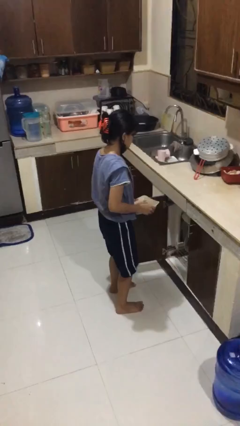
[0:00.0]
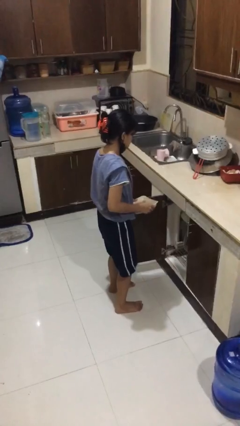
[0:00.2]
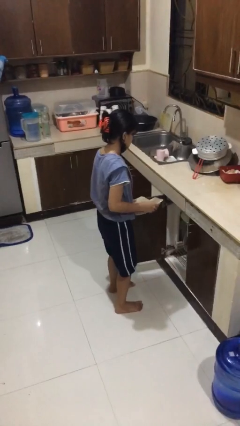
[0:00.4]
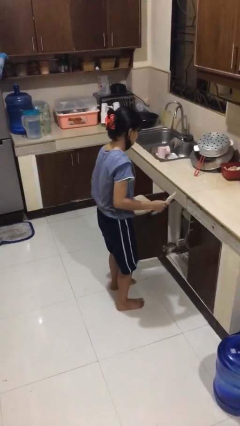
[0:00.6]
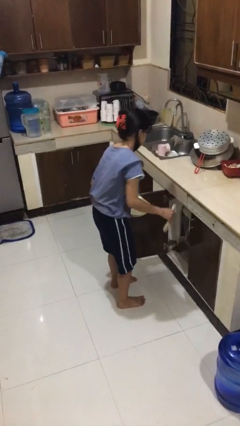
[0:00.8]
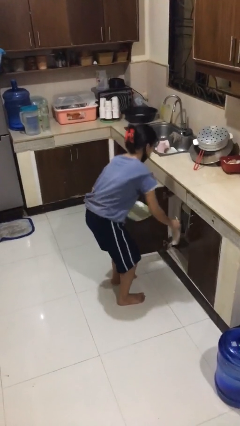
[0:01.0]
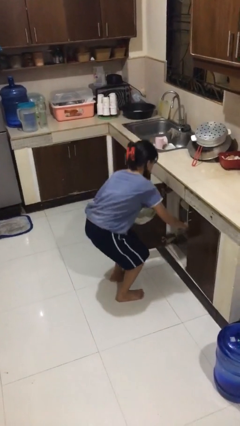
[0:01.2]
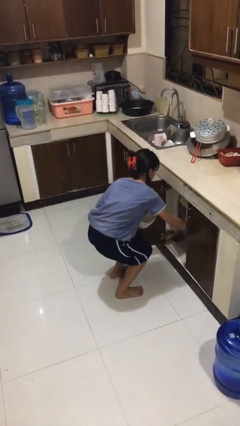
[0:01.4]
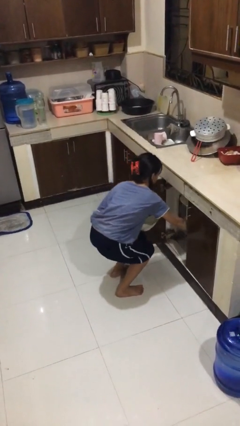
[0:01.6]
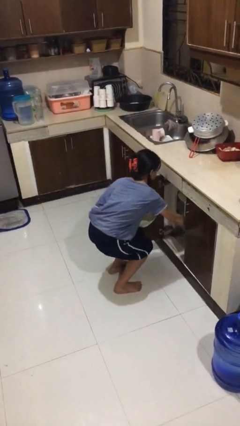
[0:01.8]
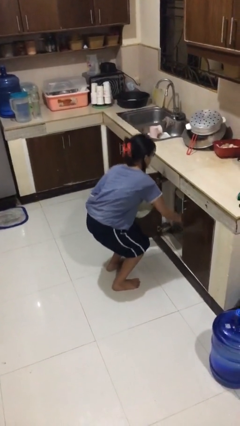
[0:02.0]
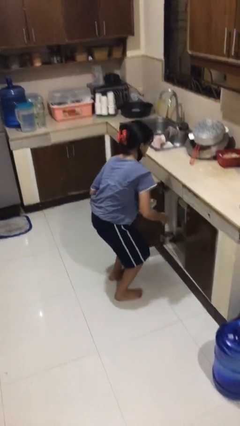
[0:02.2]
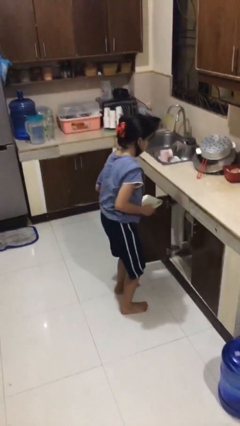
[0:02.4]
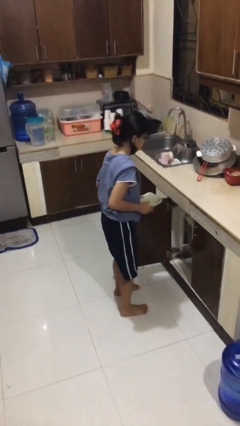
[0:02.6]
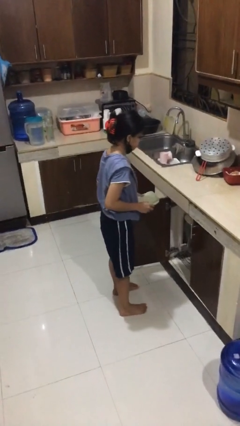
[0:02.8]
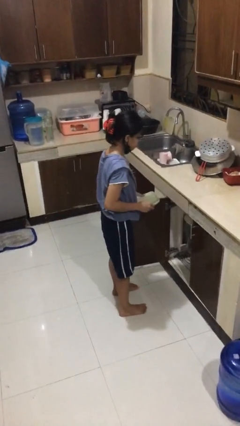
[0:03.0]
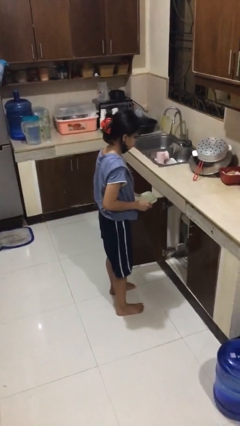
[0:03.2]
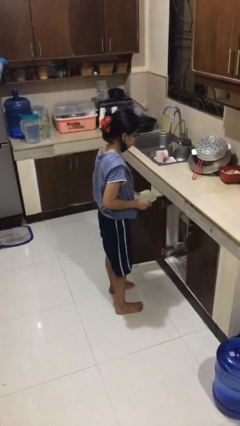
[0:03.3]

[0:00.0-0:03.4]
person loads dishwasher

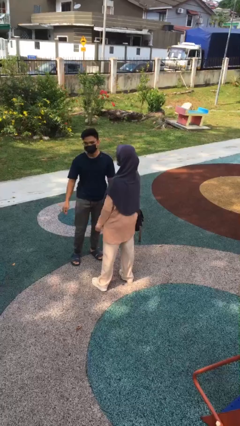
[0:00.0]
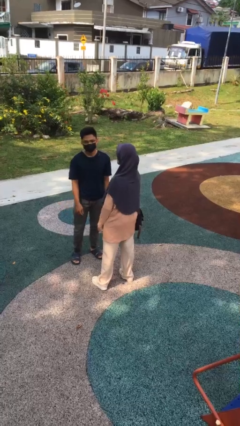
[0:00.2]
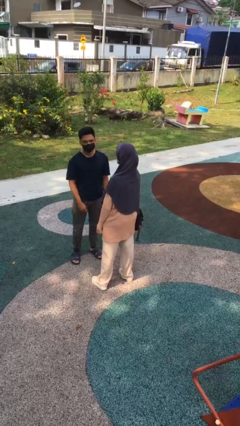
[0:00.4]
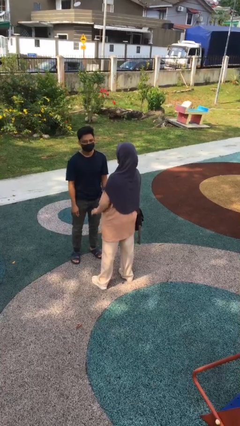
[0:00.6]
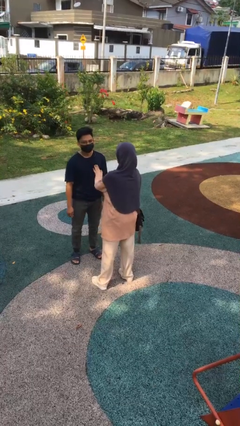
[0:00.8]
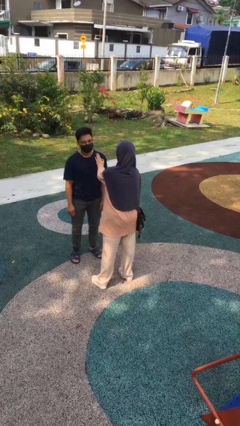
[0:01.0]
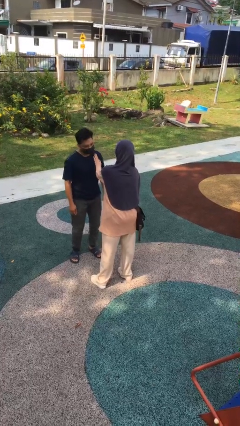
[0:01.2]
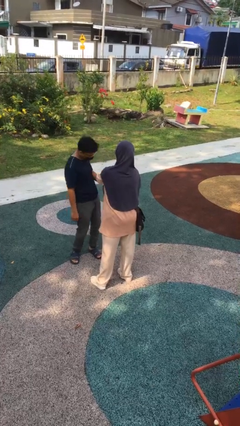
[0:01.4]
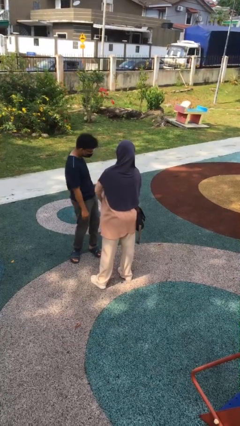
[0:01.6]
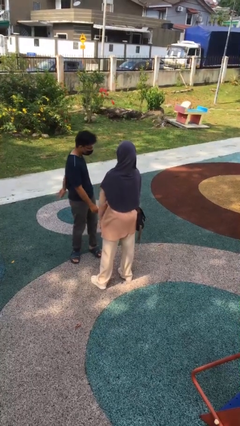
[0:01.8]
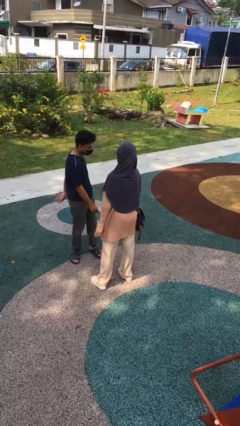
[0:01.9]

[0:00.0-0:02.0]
person shoves person

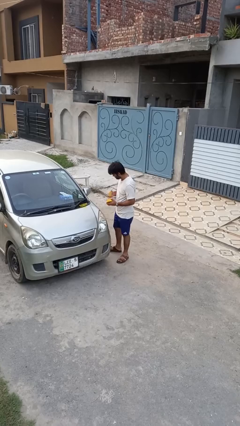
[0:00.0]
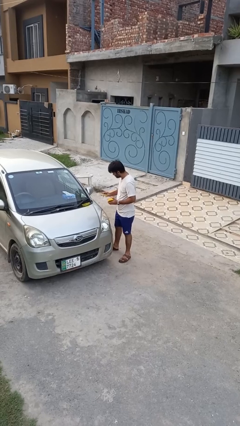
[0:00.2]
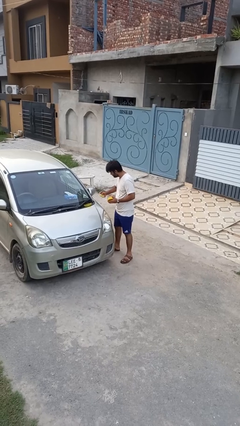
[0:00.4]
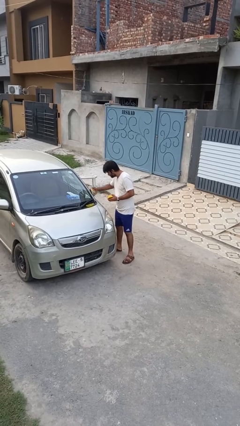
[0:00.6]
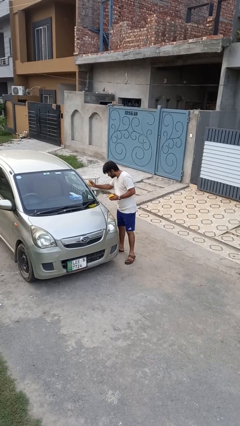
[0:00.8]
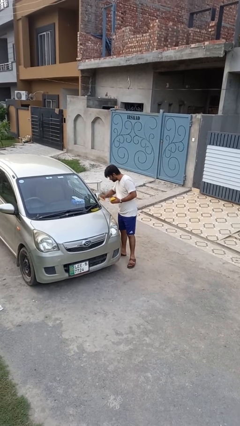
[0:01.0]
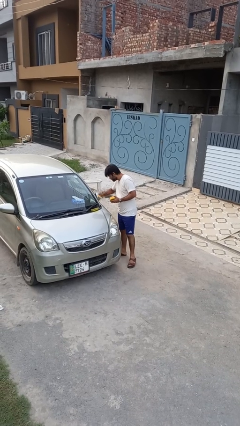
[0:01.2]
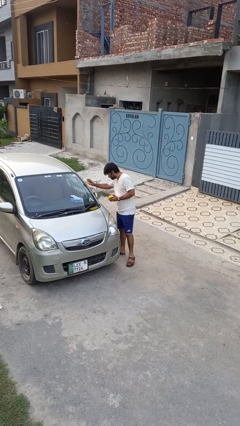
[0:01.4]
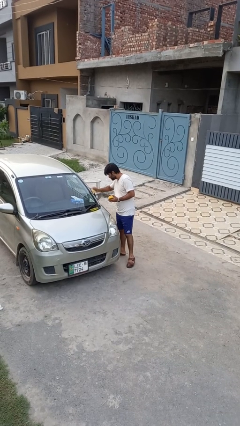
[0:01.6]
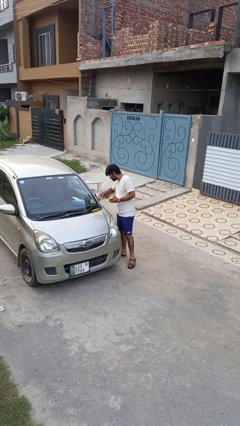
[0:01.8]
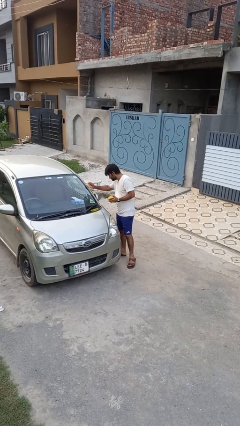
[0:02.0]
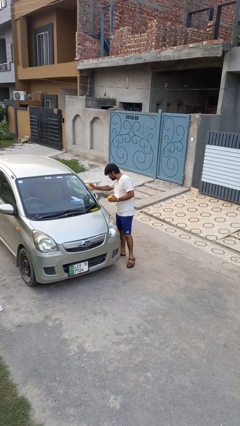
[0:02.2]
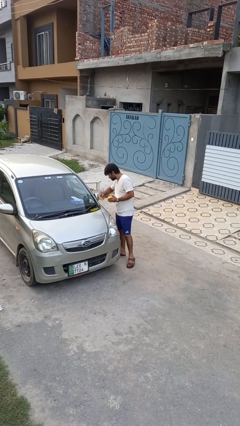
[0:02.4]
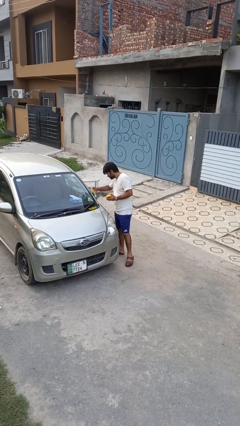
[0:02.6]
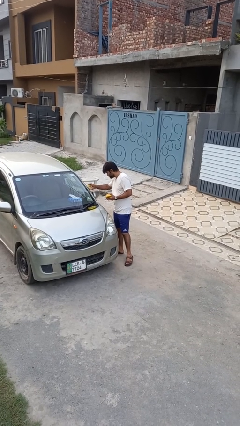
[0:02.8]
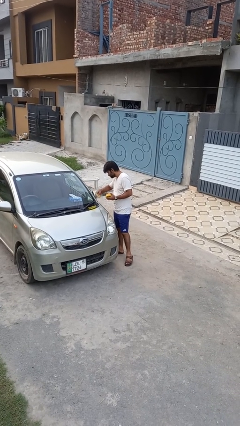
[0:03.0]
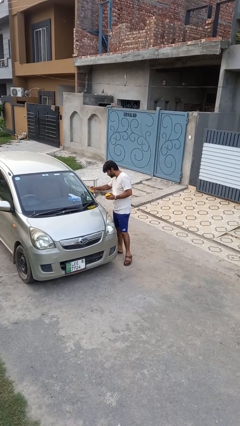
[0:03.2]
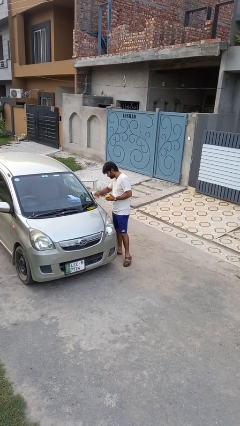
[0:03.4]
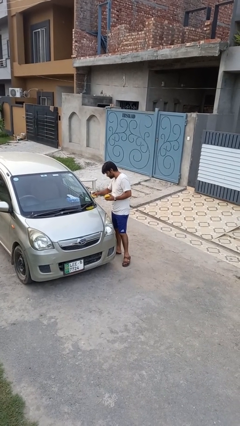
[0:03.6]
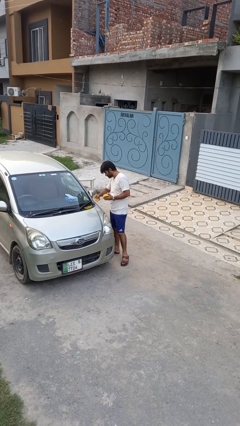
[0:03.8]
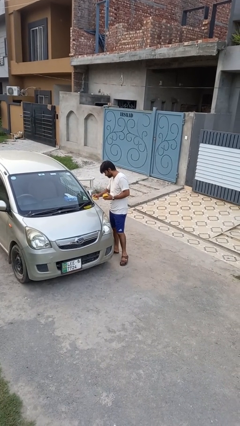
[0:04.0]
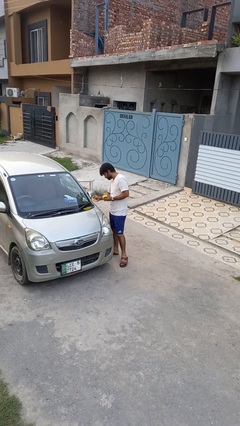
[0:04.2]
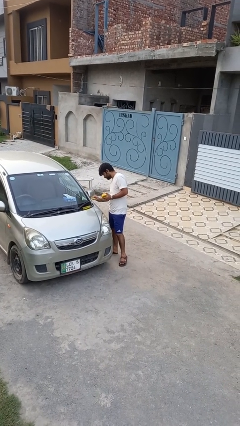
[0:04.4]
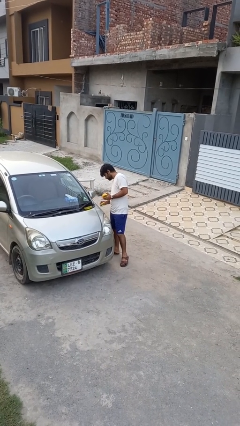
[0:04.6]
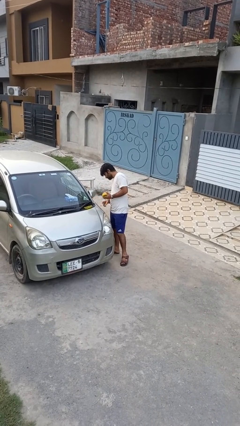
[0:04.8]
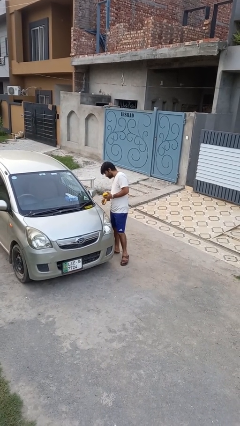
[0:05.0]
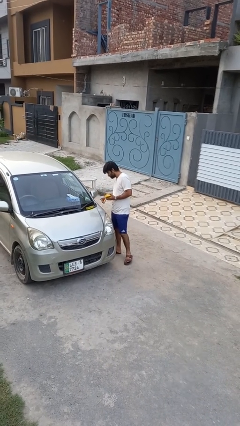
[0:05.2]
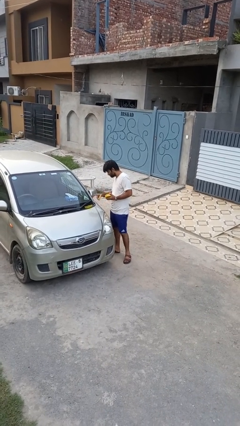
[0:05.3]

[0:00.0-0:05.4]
person polishes car with rag

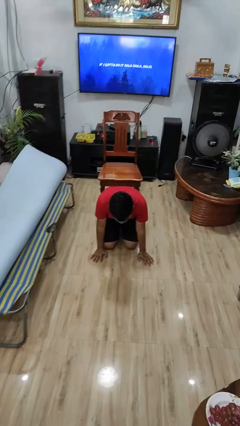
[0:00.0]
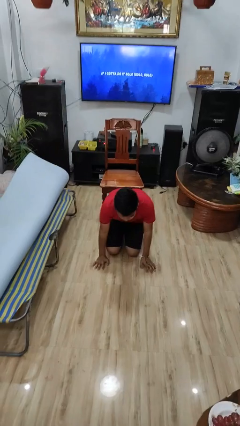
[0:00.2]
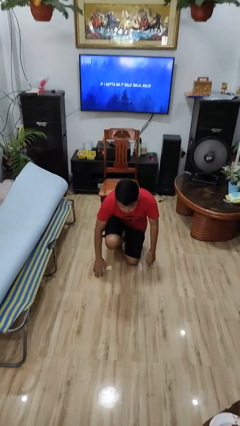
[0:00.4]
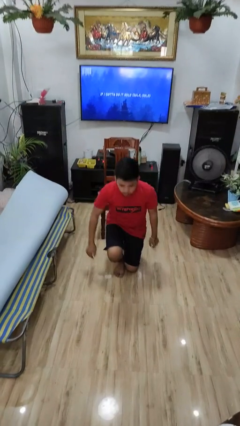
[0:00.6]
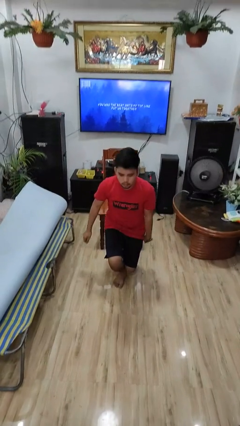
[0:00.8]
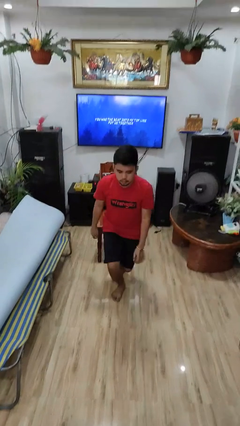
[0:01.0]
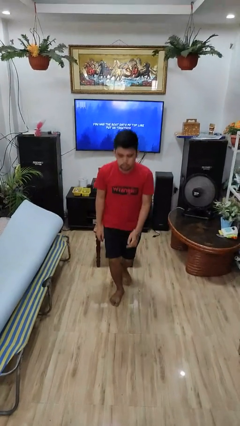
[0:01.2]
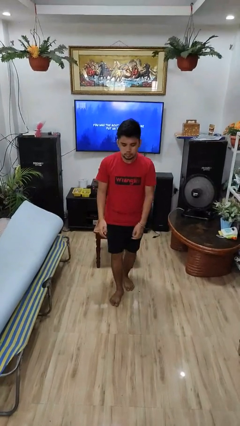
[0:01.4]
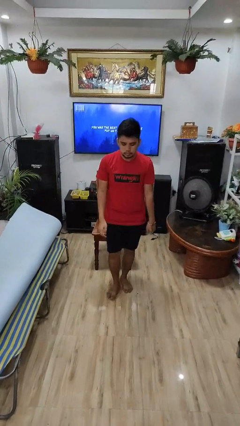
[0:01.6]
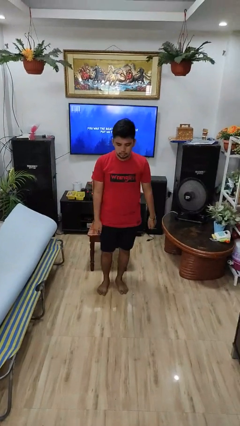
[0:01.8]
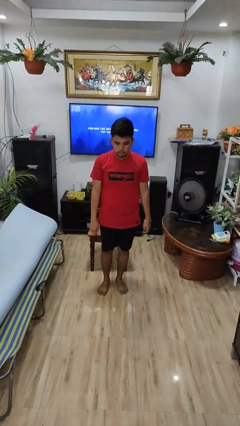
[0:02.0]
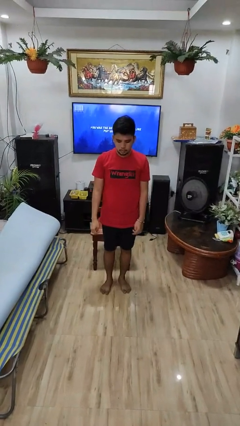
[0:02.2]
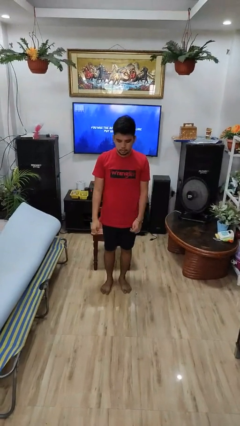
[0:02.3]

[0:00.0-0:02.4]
person stands up from floor

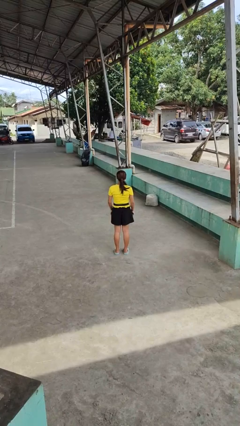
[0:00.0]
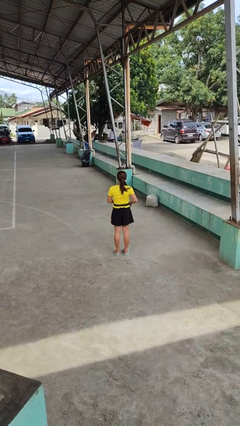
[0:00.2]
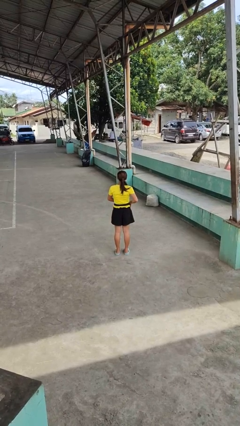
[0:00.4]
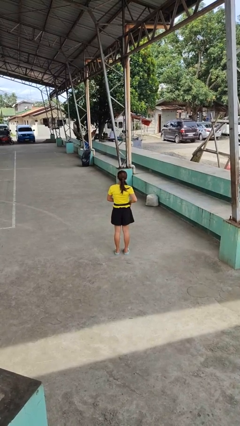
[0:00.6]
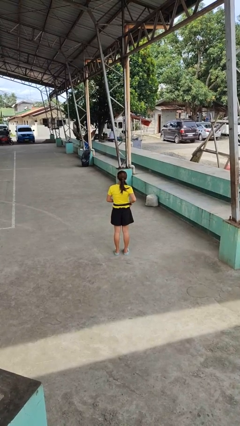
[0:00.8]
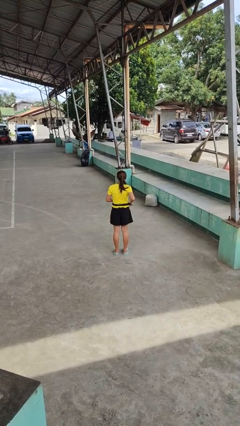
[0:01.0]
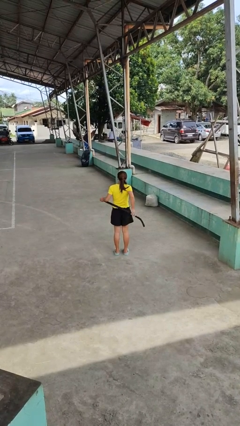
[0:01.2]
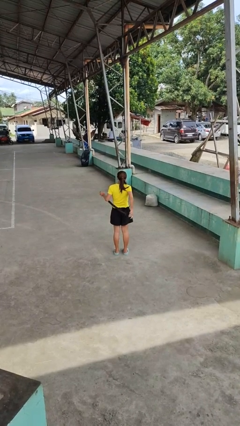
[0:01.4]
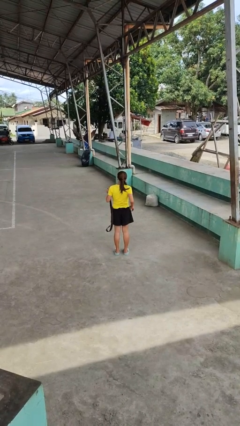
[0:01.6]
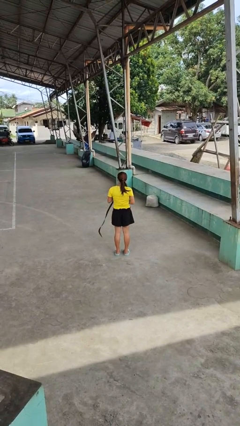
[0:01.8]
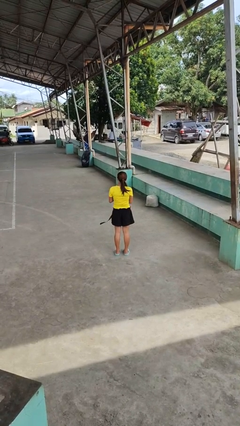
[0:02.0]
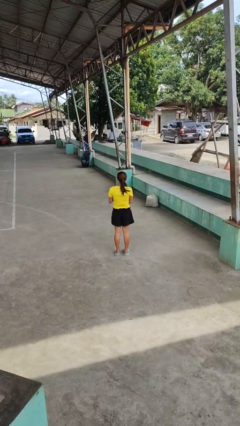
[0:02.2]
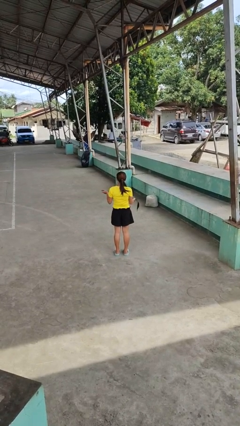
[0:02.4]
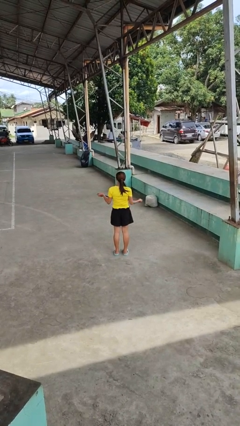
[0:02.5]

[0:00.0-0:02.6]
person takes off belt

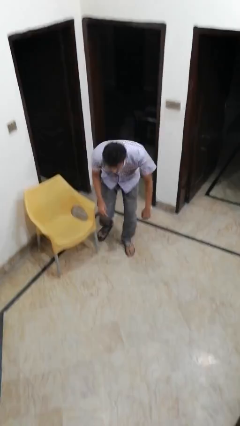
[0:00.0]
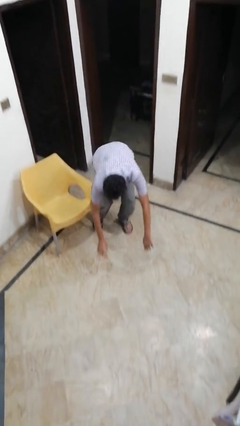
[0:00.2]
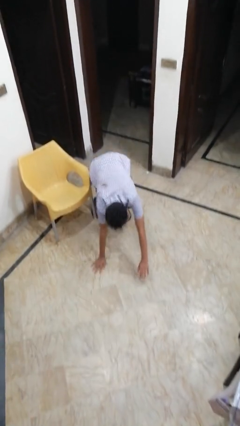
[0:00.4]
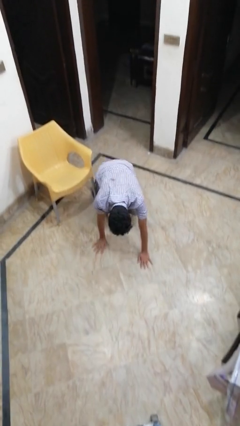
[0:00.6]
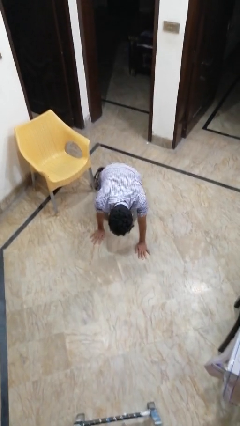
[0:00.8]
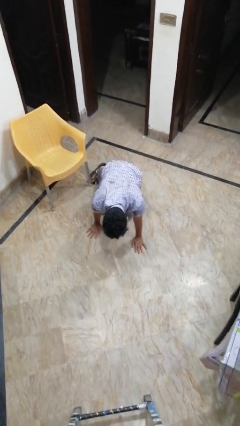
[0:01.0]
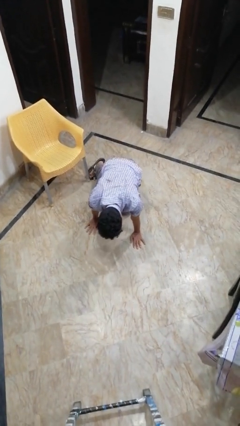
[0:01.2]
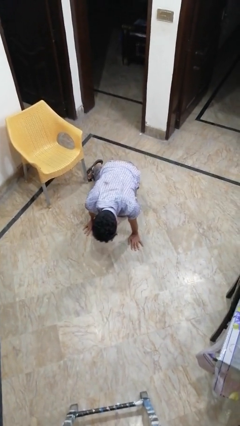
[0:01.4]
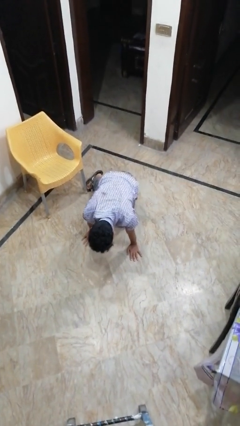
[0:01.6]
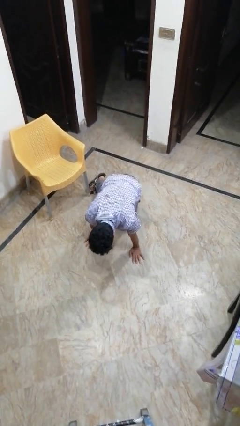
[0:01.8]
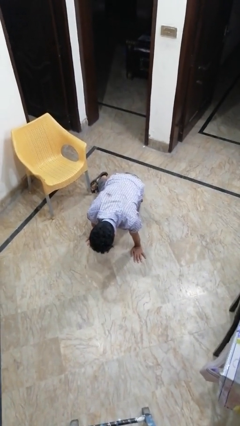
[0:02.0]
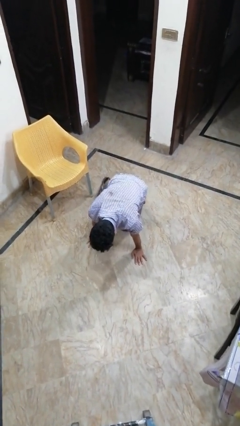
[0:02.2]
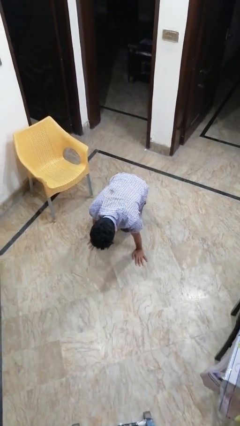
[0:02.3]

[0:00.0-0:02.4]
person trips on object on floor
